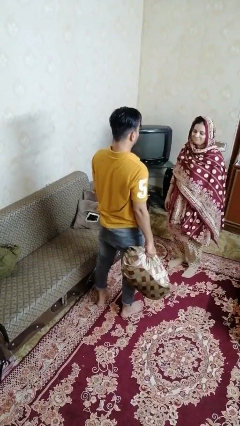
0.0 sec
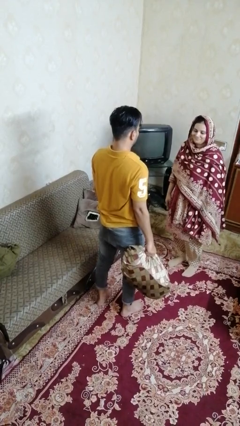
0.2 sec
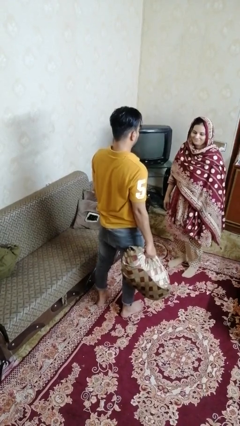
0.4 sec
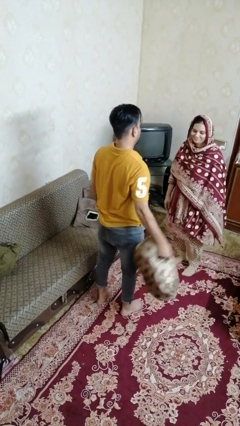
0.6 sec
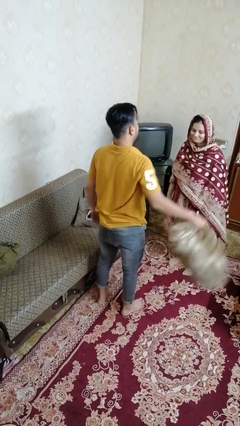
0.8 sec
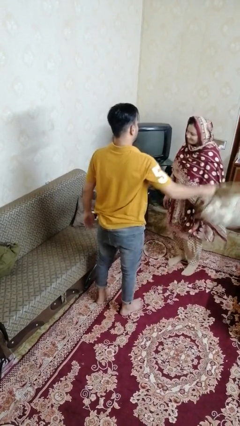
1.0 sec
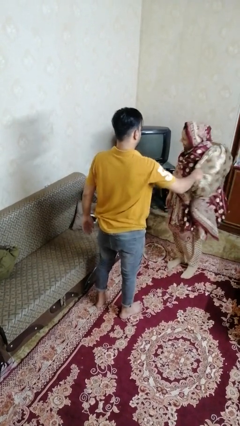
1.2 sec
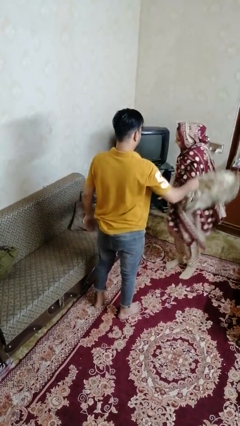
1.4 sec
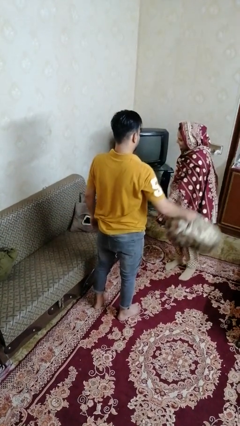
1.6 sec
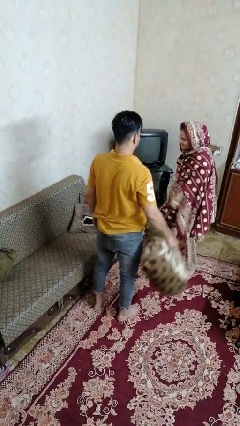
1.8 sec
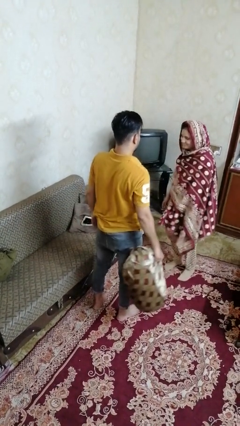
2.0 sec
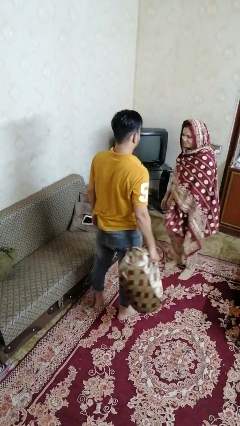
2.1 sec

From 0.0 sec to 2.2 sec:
person hits person with pillow

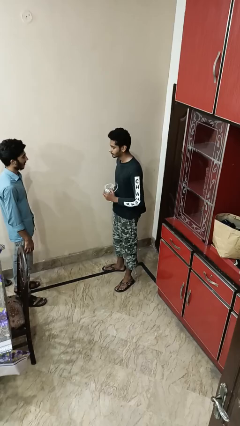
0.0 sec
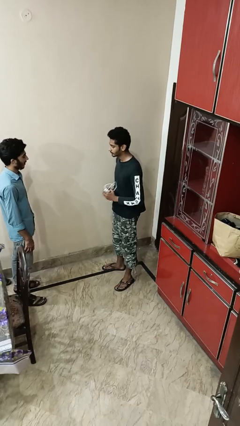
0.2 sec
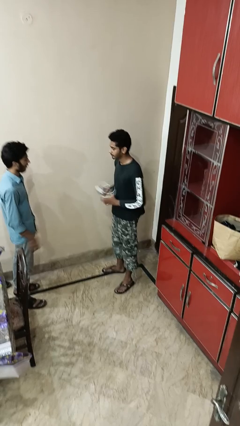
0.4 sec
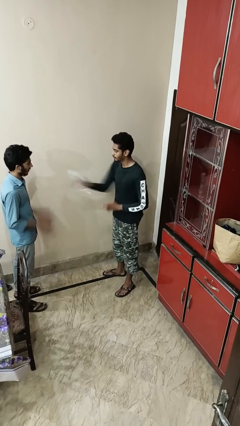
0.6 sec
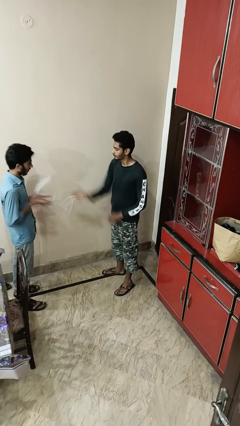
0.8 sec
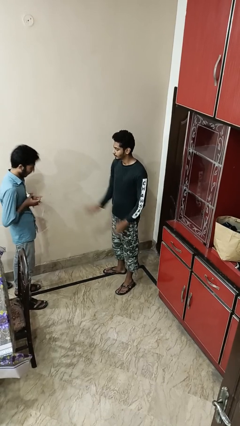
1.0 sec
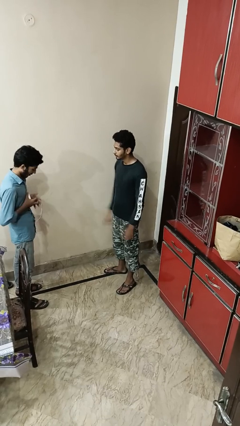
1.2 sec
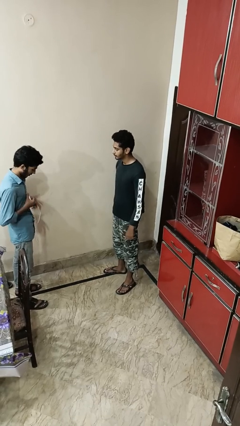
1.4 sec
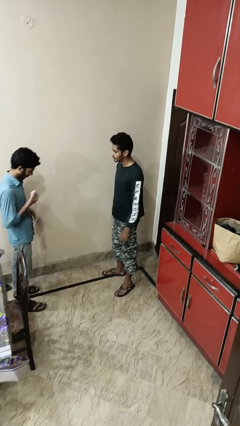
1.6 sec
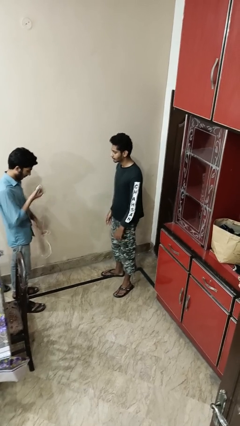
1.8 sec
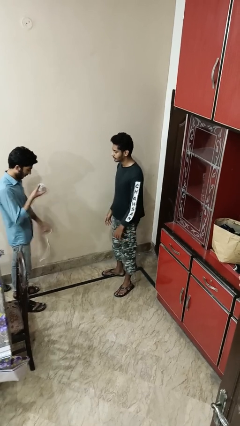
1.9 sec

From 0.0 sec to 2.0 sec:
person throws object to person

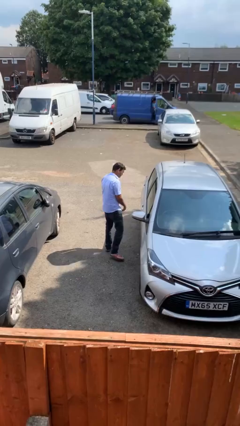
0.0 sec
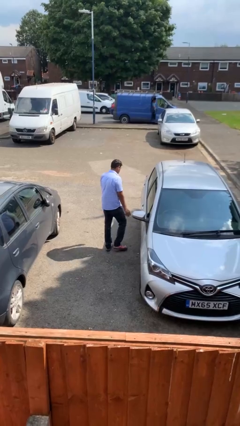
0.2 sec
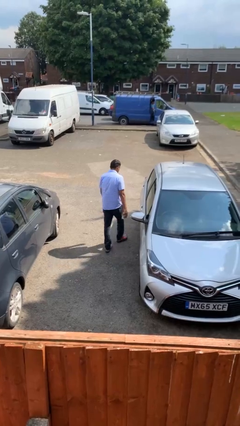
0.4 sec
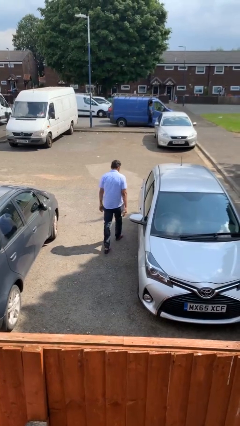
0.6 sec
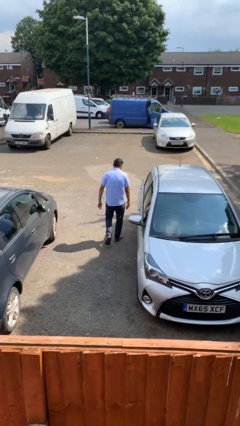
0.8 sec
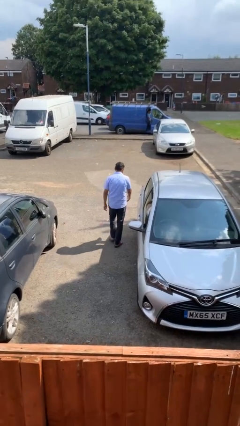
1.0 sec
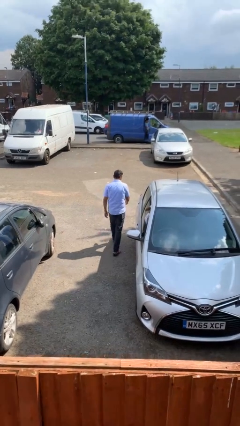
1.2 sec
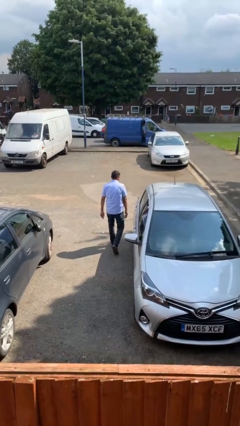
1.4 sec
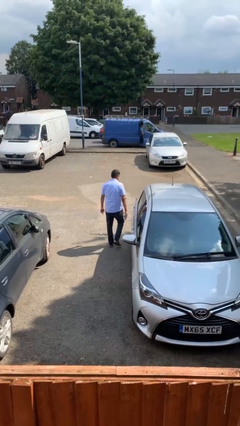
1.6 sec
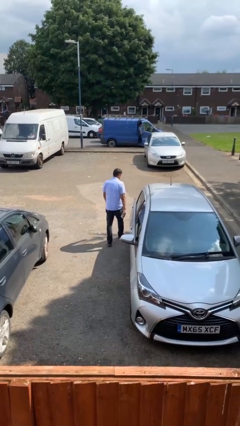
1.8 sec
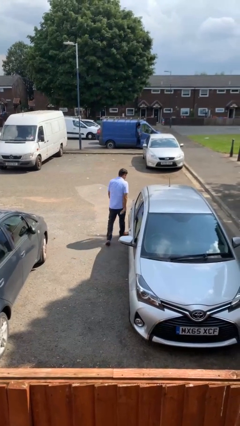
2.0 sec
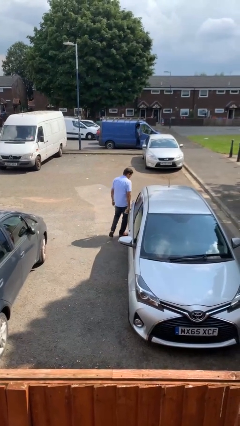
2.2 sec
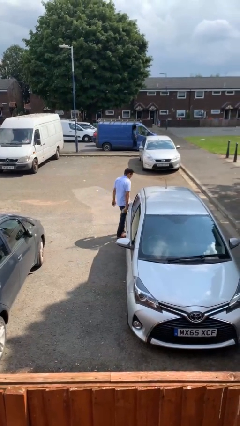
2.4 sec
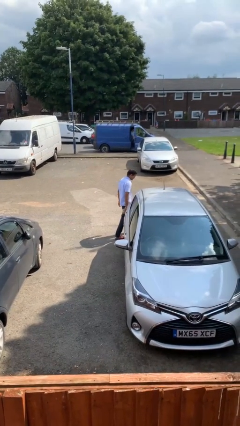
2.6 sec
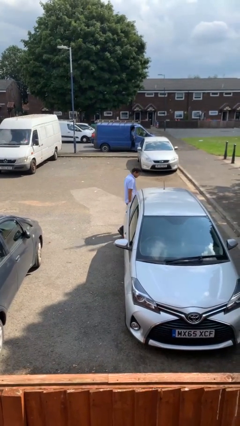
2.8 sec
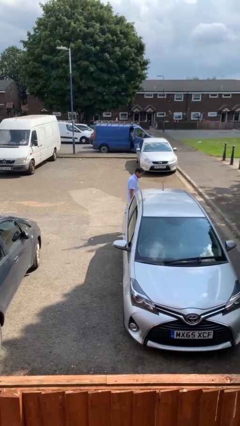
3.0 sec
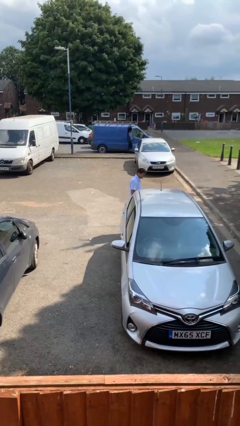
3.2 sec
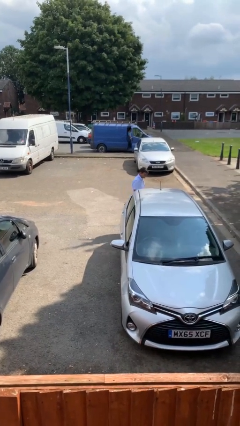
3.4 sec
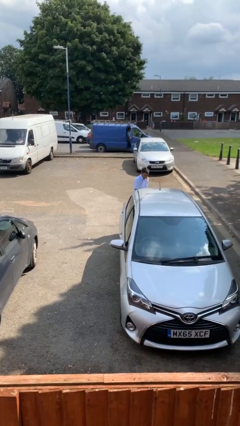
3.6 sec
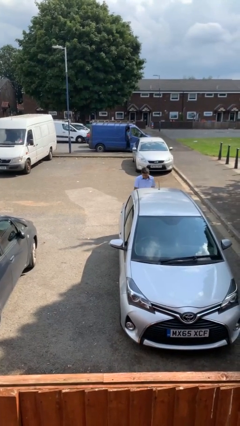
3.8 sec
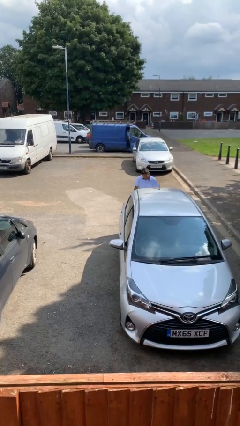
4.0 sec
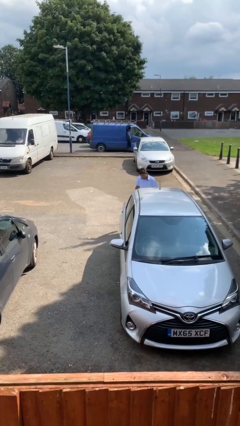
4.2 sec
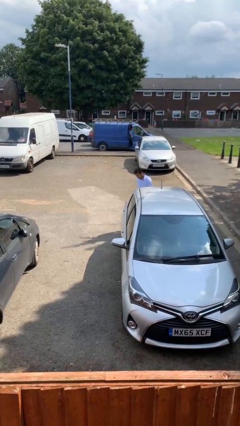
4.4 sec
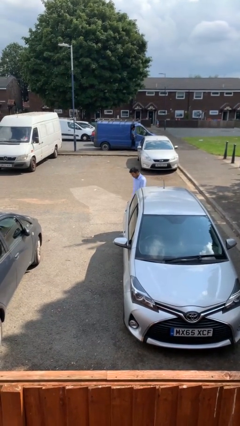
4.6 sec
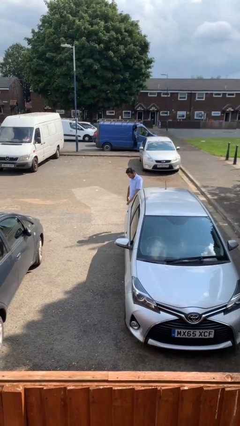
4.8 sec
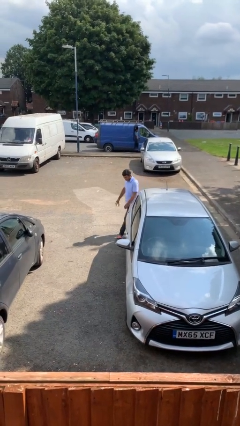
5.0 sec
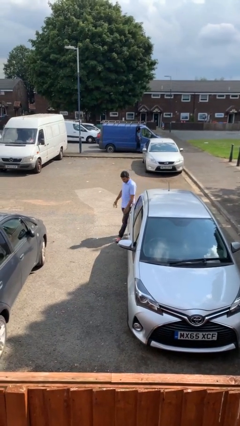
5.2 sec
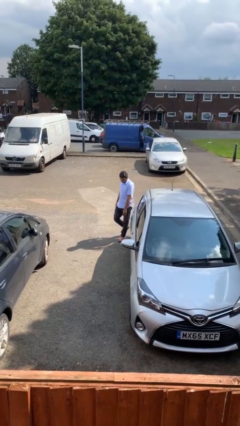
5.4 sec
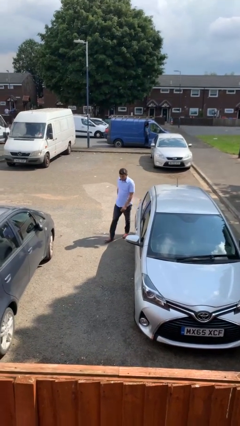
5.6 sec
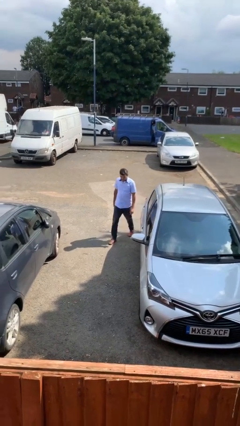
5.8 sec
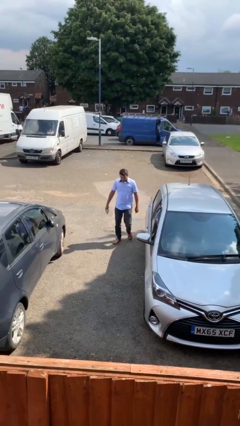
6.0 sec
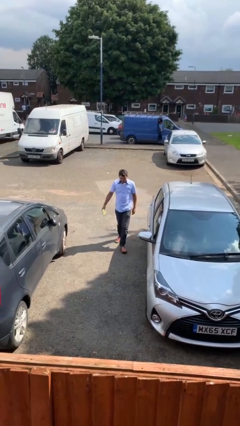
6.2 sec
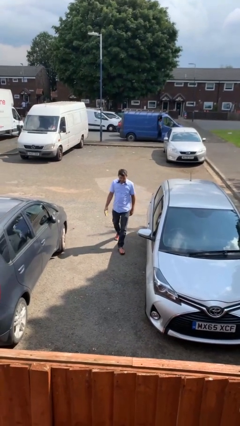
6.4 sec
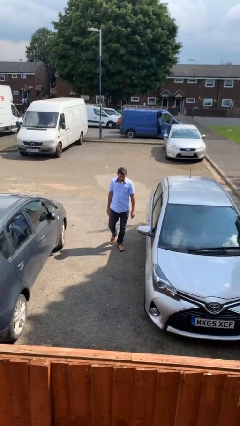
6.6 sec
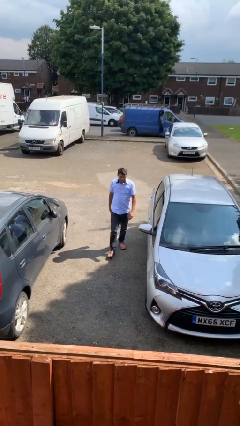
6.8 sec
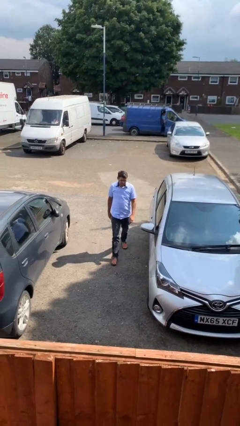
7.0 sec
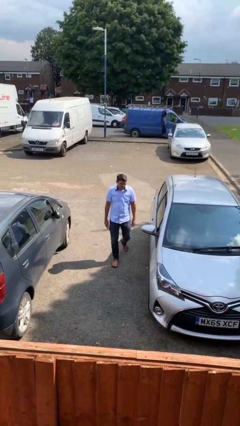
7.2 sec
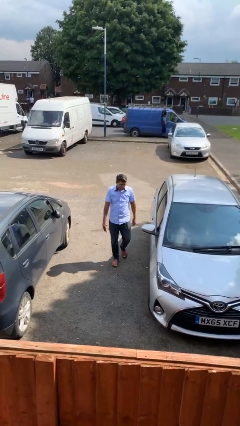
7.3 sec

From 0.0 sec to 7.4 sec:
person walks around car

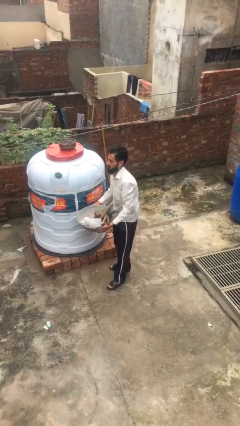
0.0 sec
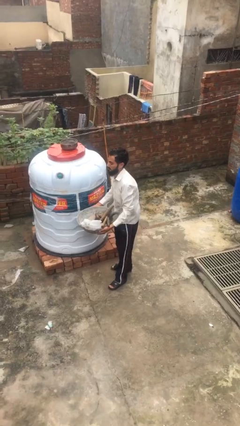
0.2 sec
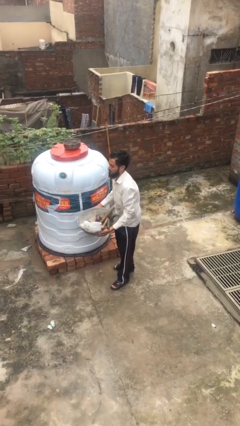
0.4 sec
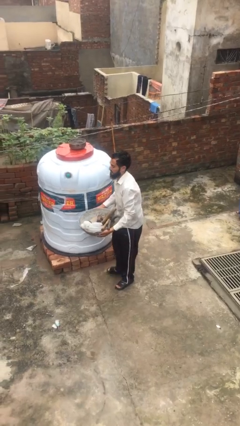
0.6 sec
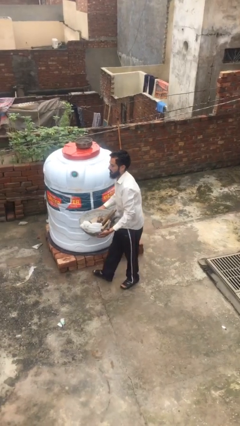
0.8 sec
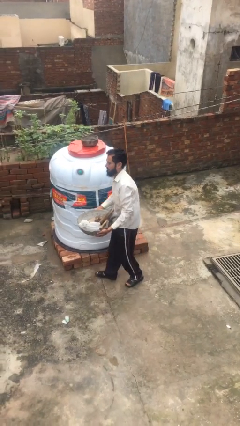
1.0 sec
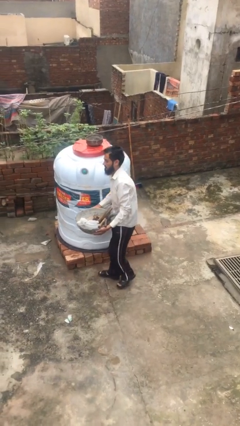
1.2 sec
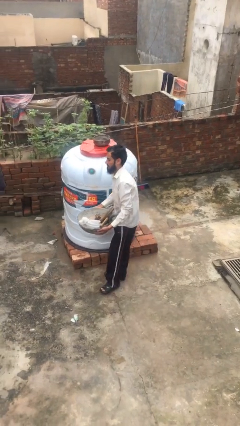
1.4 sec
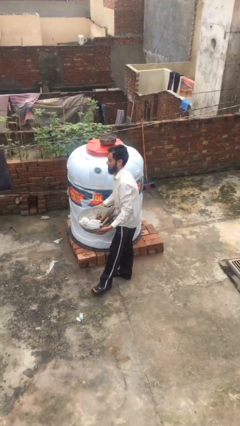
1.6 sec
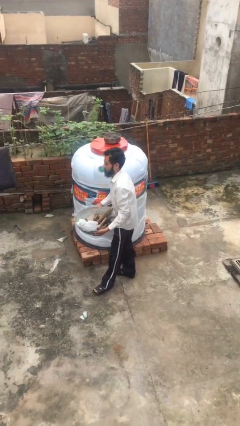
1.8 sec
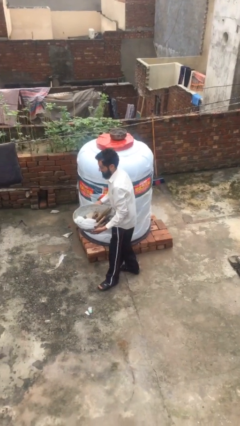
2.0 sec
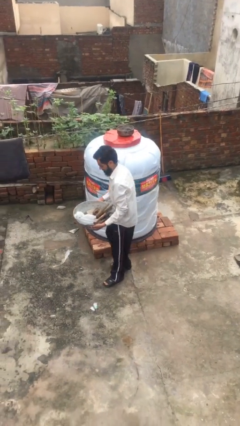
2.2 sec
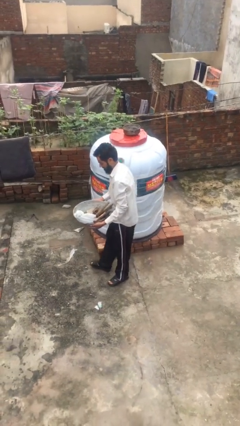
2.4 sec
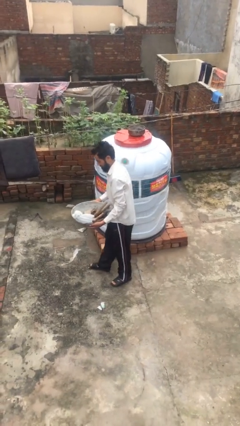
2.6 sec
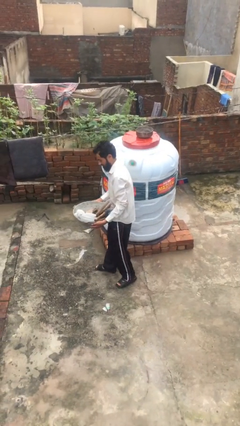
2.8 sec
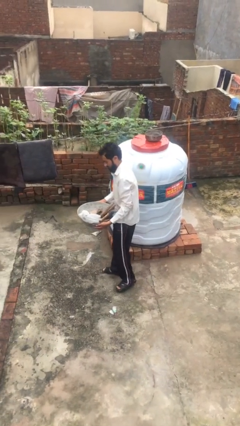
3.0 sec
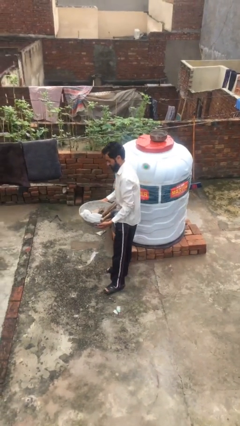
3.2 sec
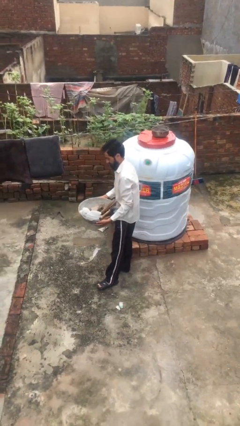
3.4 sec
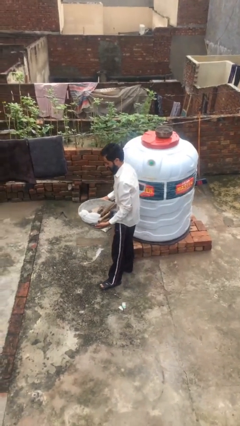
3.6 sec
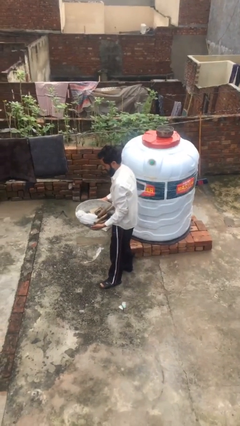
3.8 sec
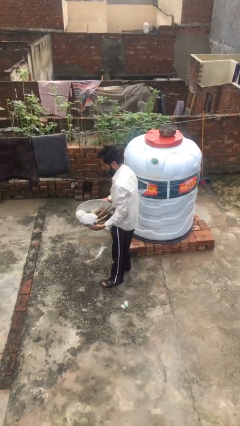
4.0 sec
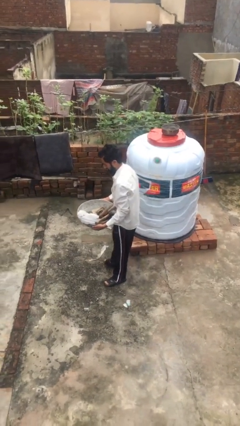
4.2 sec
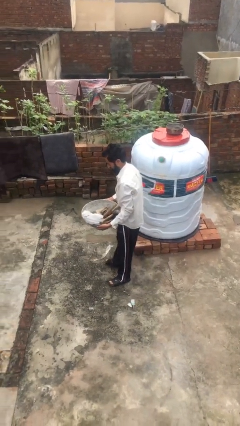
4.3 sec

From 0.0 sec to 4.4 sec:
person carries heavy object

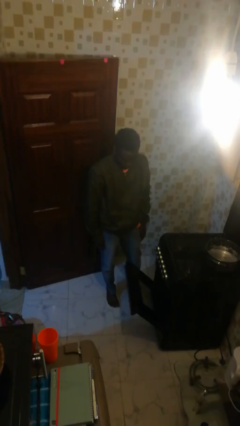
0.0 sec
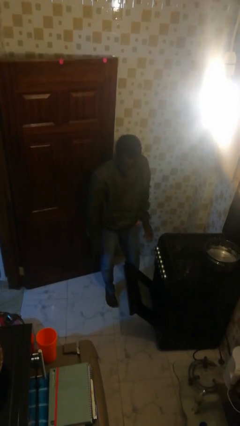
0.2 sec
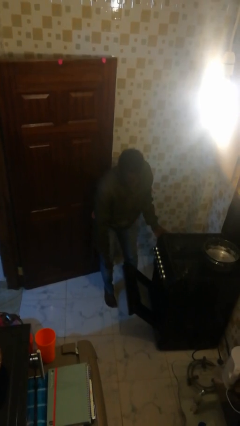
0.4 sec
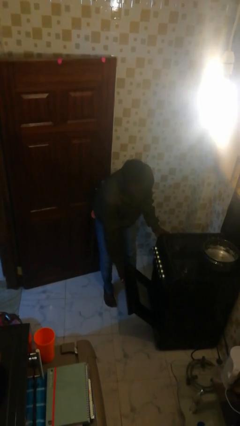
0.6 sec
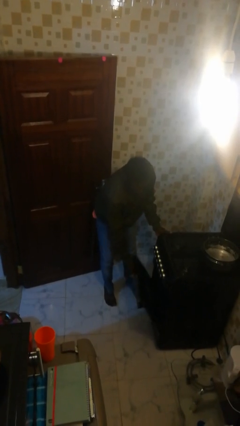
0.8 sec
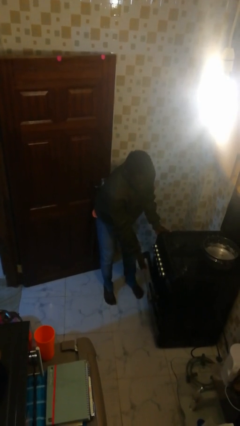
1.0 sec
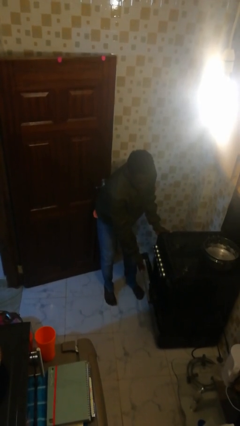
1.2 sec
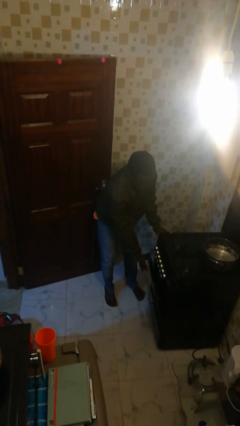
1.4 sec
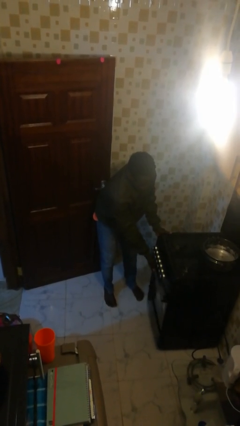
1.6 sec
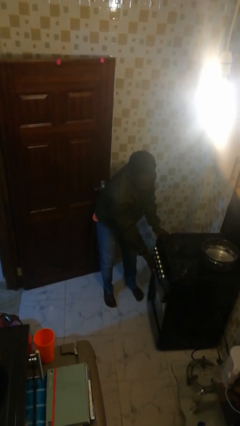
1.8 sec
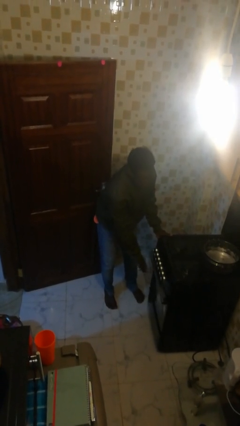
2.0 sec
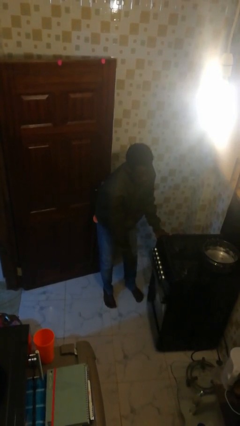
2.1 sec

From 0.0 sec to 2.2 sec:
person closes oven door
